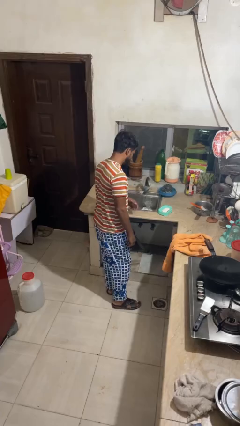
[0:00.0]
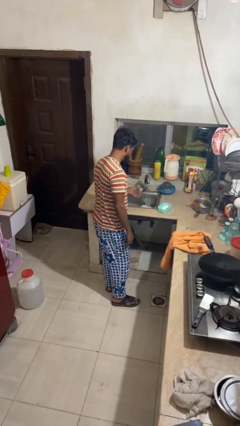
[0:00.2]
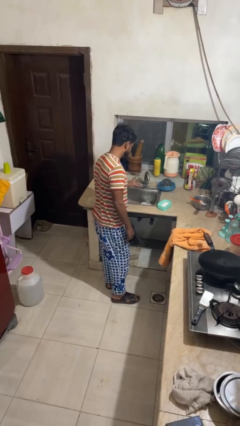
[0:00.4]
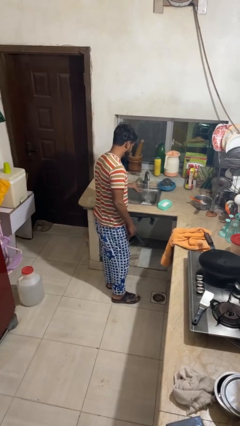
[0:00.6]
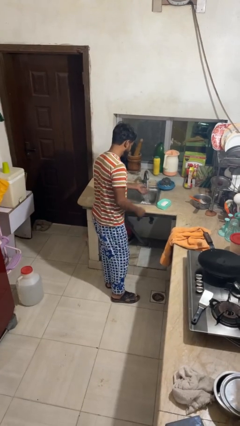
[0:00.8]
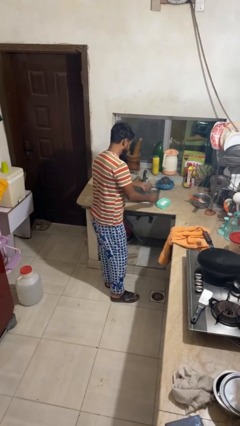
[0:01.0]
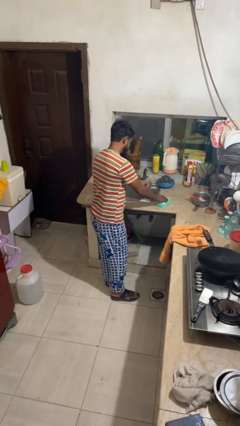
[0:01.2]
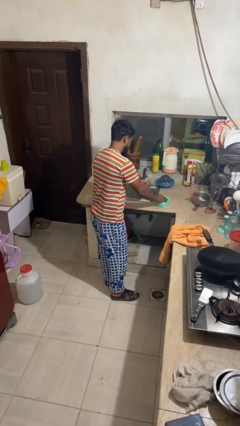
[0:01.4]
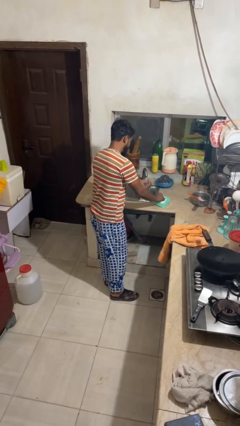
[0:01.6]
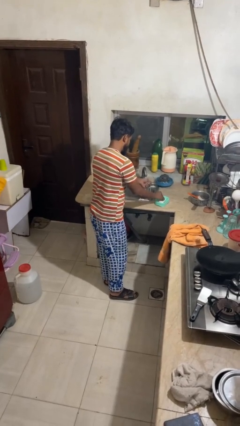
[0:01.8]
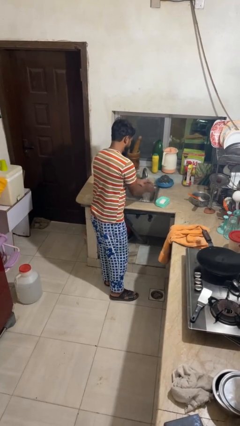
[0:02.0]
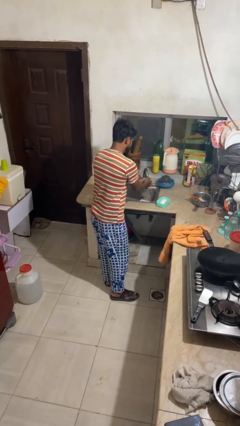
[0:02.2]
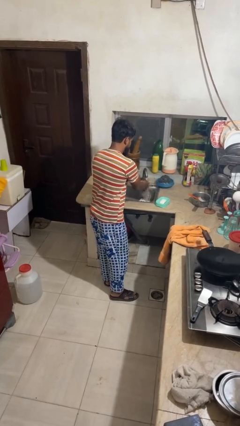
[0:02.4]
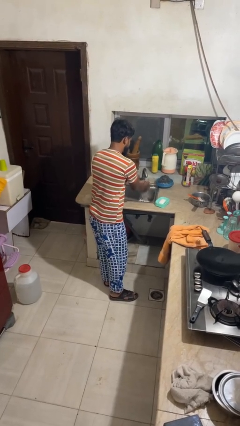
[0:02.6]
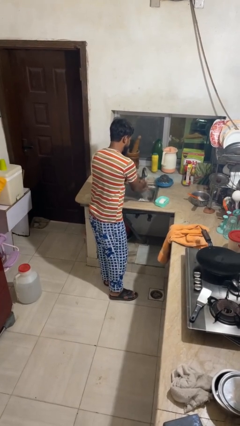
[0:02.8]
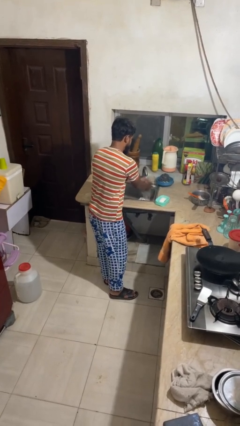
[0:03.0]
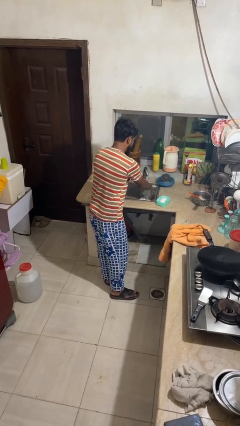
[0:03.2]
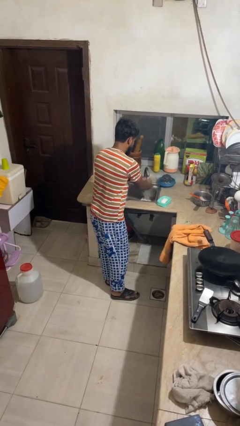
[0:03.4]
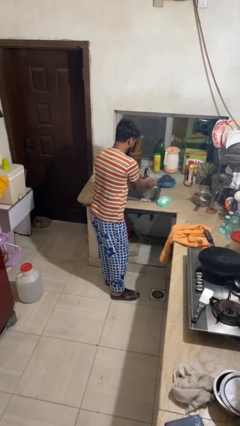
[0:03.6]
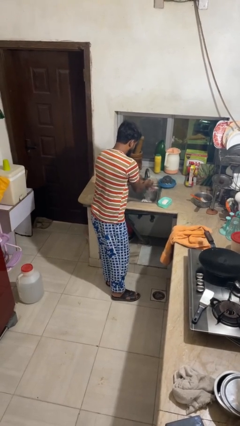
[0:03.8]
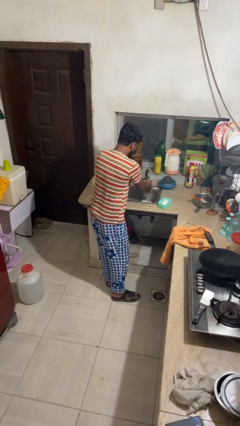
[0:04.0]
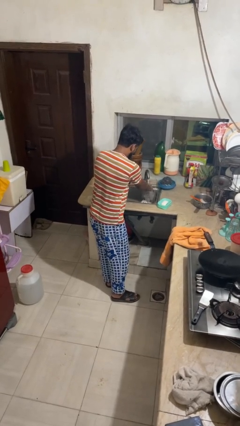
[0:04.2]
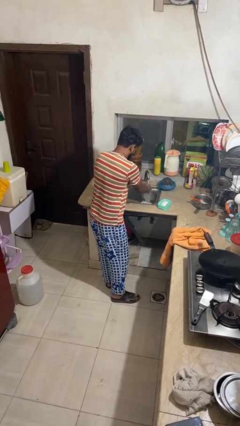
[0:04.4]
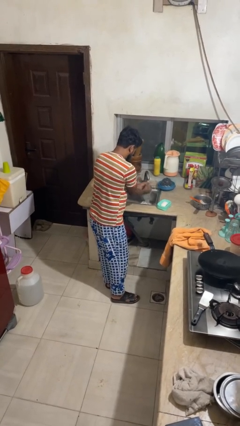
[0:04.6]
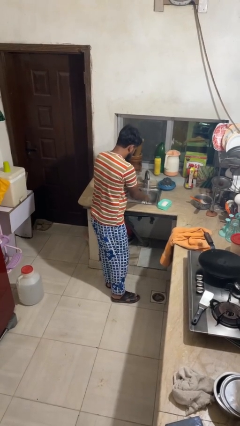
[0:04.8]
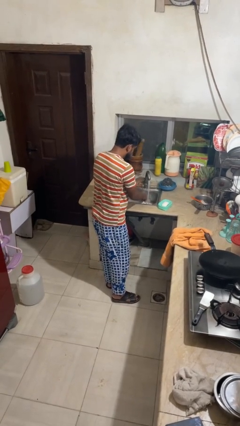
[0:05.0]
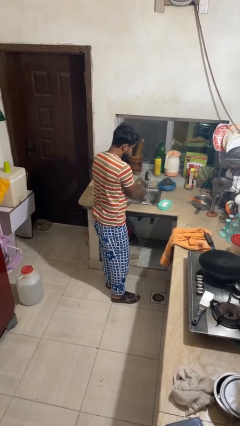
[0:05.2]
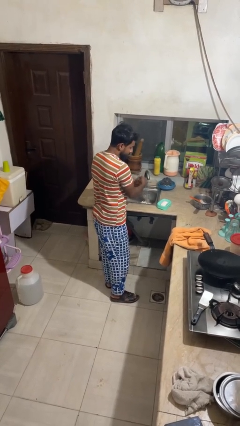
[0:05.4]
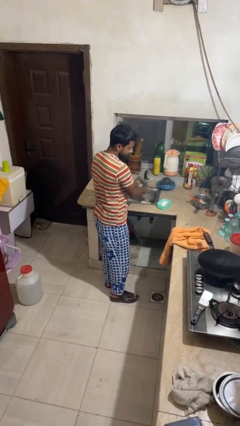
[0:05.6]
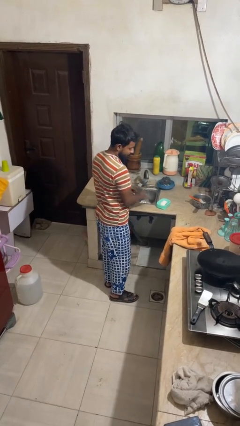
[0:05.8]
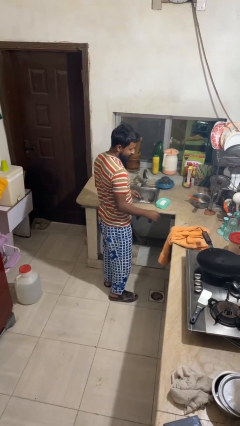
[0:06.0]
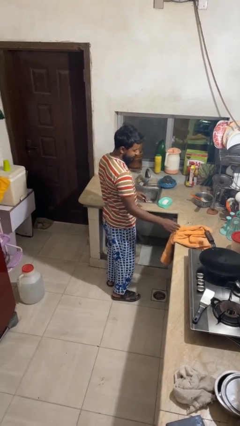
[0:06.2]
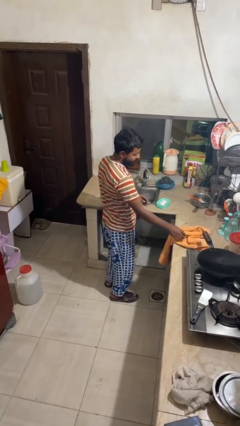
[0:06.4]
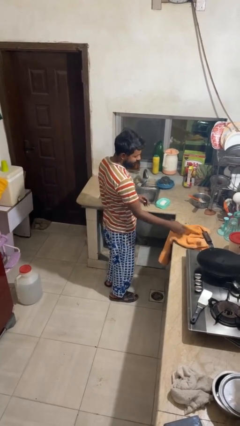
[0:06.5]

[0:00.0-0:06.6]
person washes hands

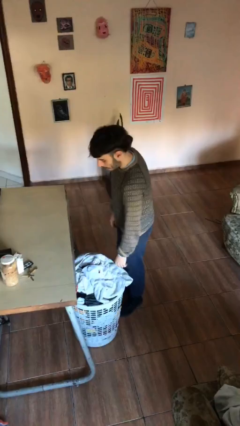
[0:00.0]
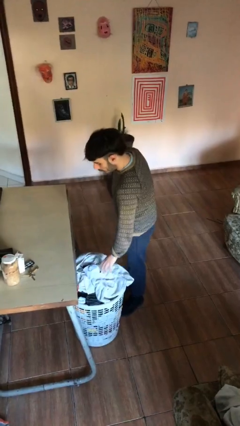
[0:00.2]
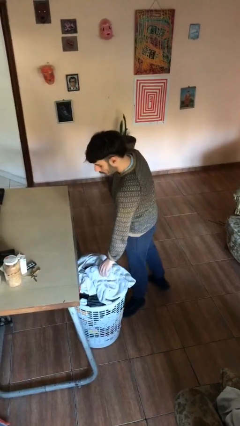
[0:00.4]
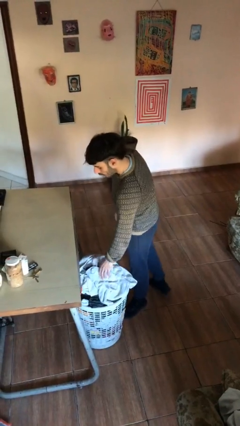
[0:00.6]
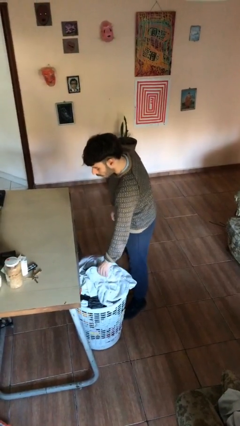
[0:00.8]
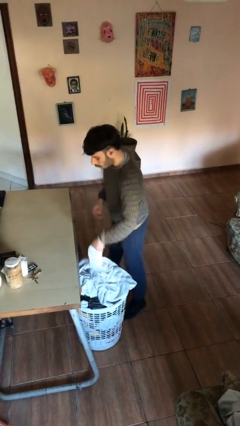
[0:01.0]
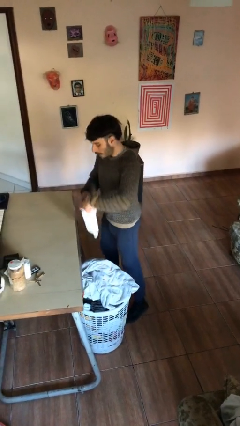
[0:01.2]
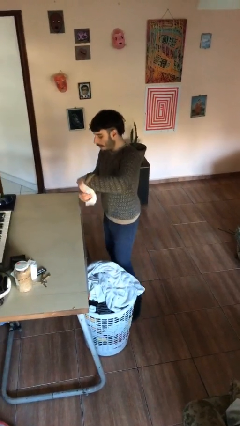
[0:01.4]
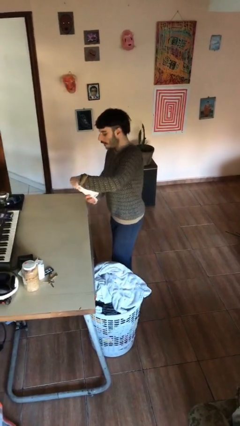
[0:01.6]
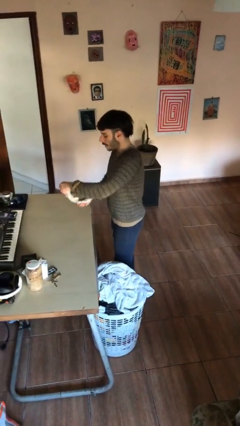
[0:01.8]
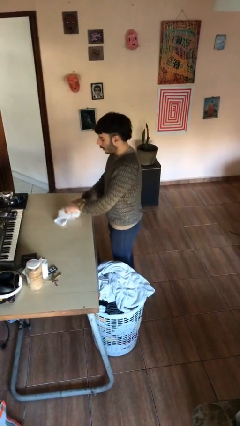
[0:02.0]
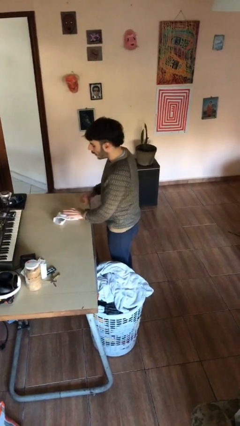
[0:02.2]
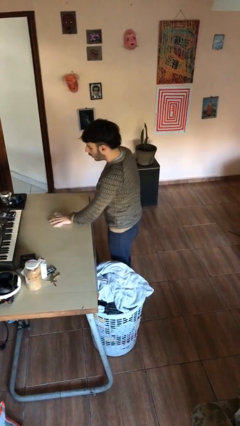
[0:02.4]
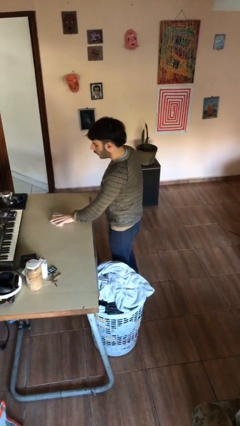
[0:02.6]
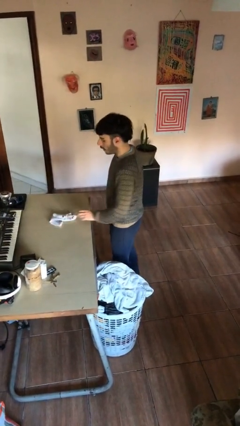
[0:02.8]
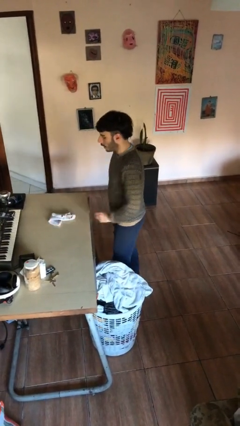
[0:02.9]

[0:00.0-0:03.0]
person folds socks

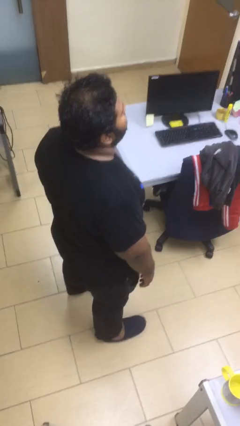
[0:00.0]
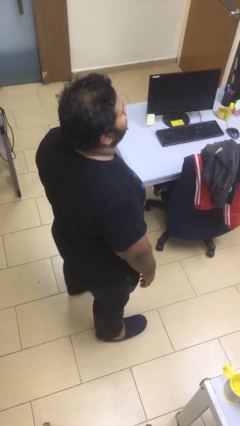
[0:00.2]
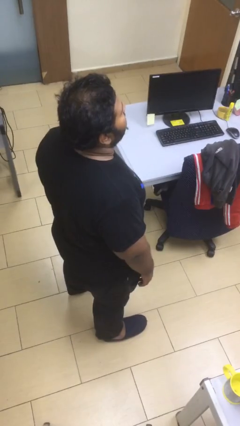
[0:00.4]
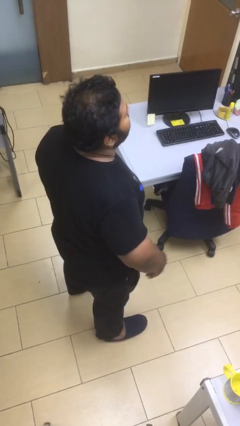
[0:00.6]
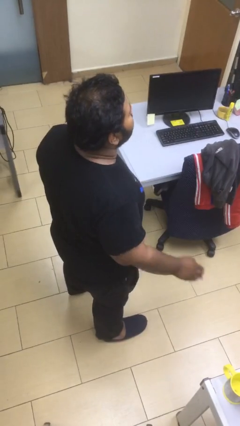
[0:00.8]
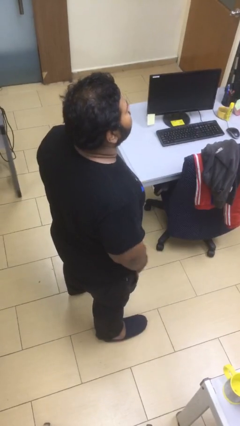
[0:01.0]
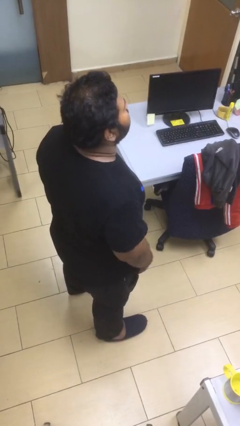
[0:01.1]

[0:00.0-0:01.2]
person slaps hands on thighs

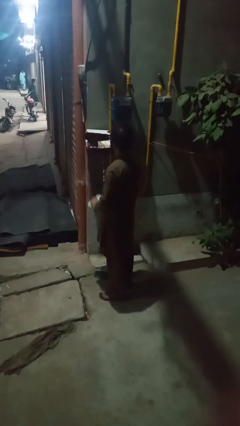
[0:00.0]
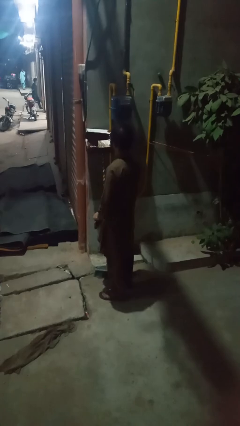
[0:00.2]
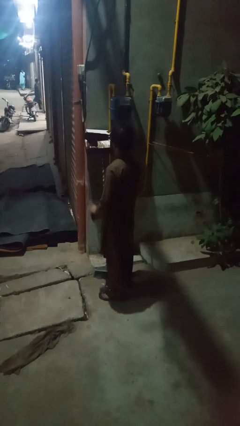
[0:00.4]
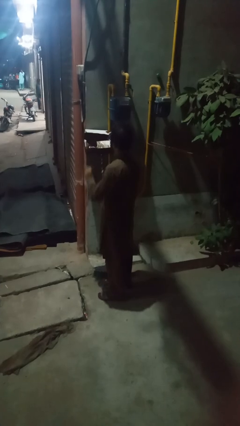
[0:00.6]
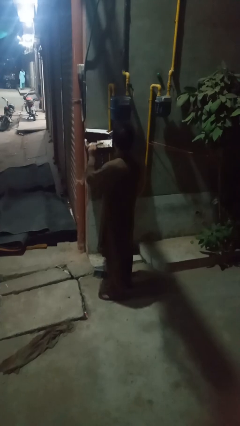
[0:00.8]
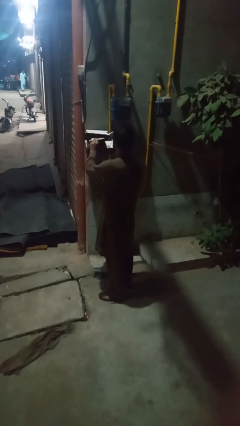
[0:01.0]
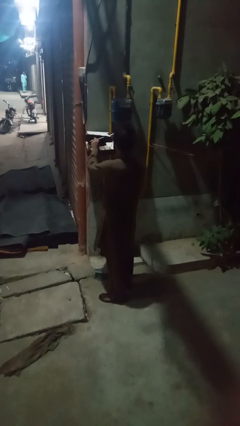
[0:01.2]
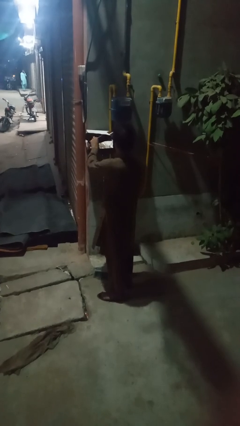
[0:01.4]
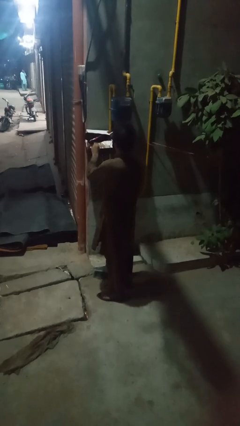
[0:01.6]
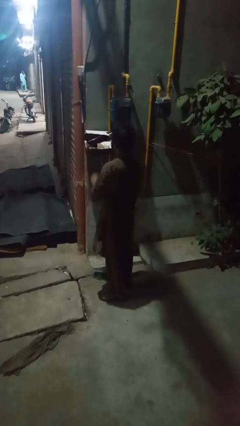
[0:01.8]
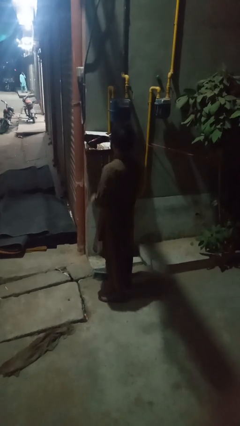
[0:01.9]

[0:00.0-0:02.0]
person takes letters from mailbox

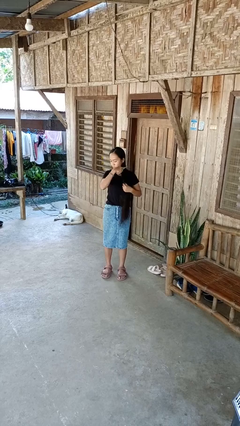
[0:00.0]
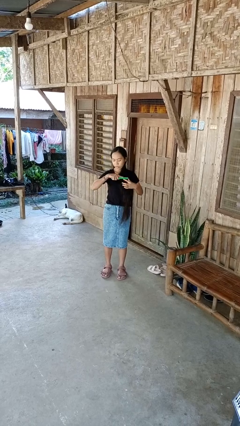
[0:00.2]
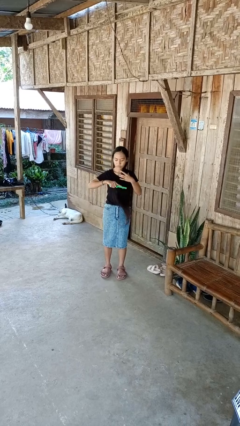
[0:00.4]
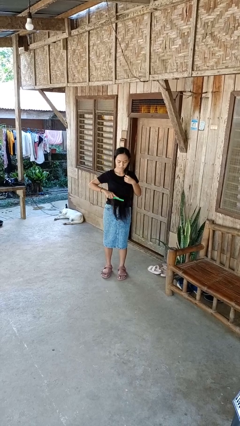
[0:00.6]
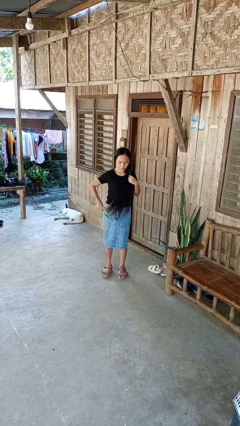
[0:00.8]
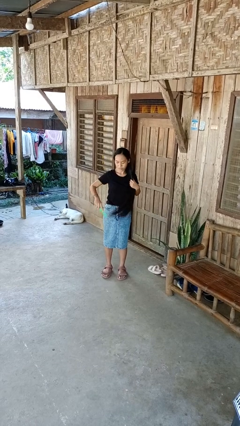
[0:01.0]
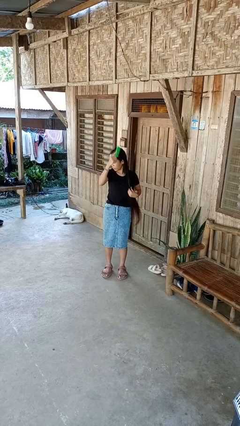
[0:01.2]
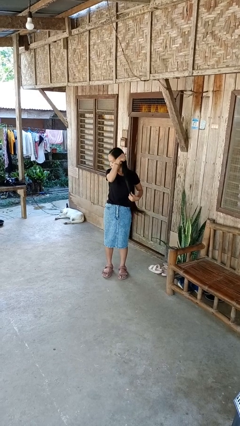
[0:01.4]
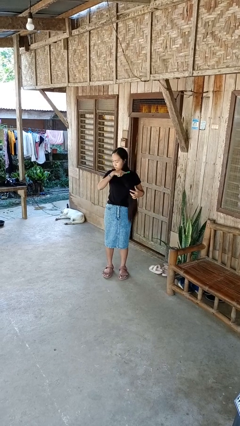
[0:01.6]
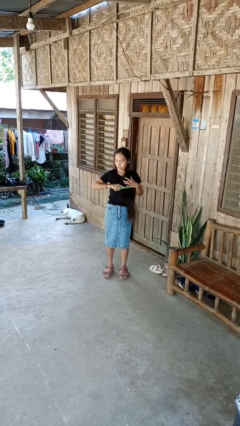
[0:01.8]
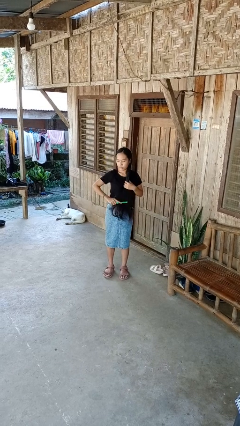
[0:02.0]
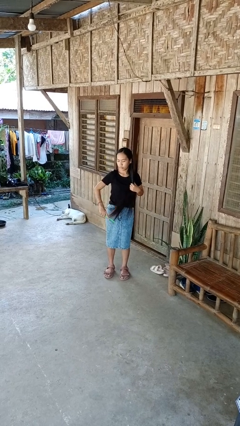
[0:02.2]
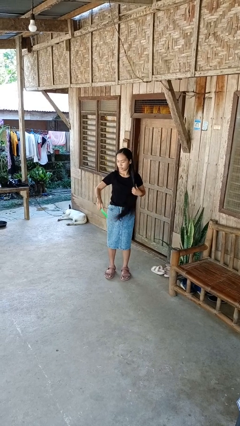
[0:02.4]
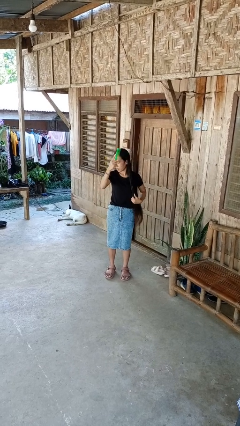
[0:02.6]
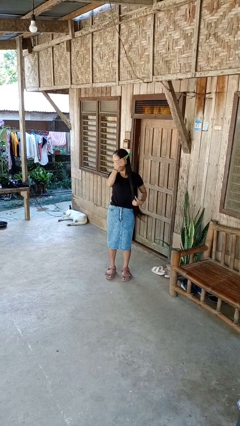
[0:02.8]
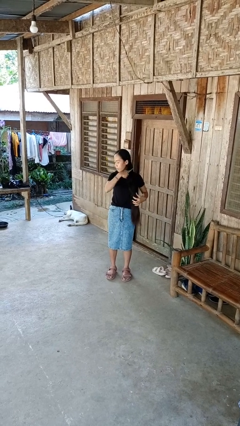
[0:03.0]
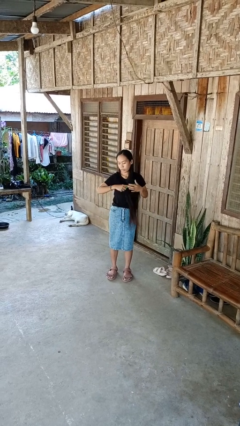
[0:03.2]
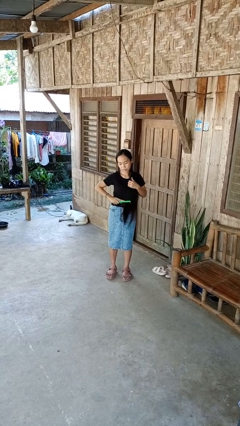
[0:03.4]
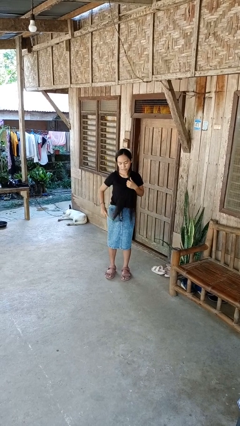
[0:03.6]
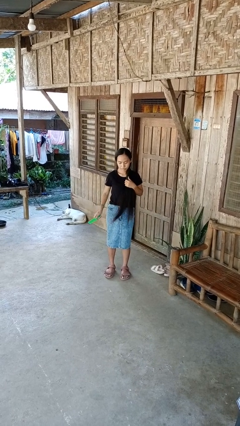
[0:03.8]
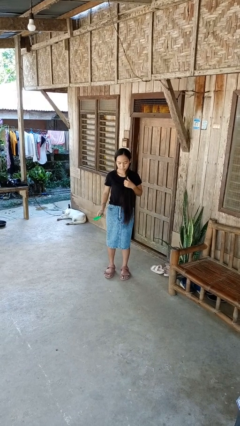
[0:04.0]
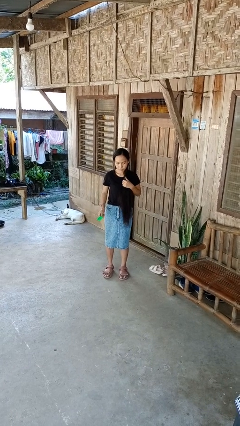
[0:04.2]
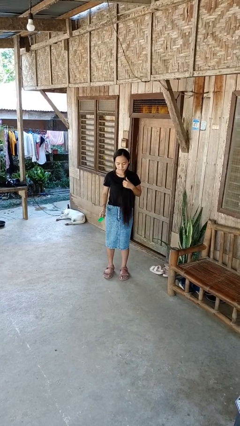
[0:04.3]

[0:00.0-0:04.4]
person brushes hair
